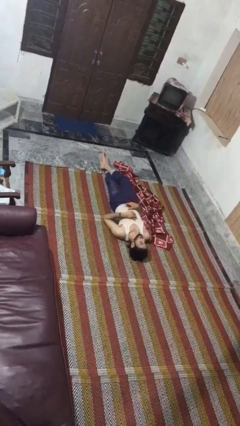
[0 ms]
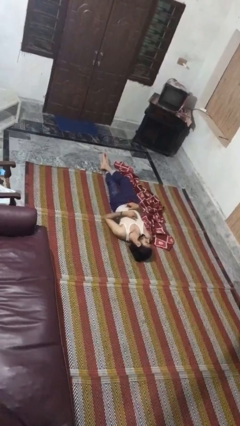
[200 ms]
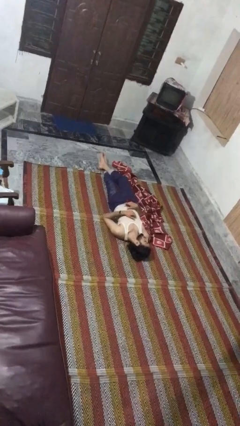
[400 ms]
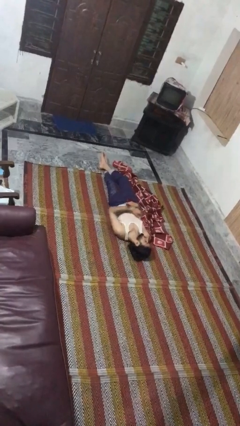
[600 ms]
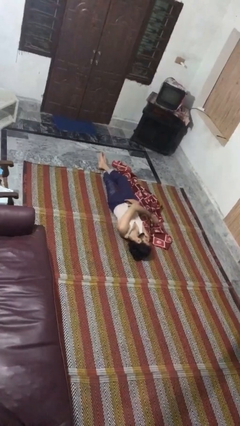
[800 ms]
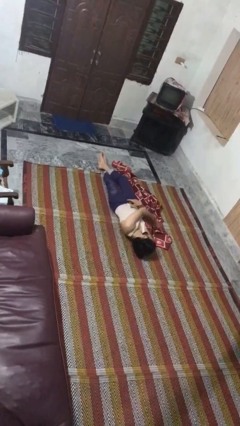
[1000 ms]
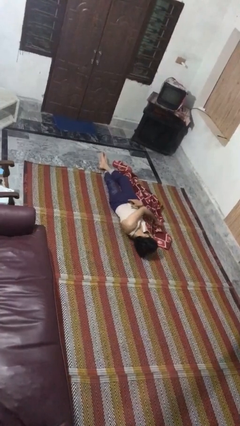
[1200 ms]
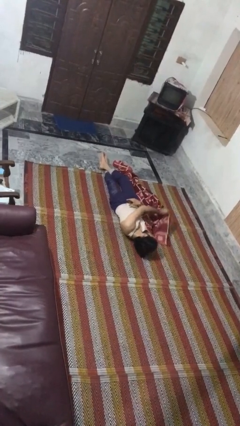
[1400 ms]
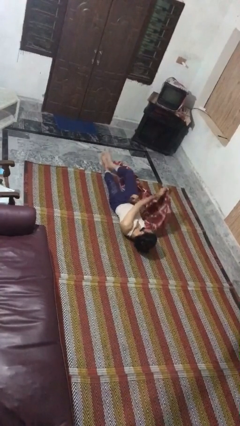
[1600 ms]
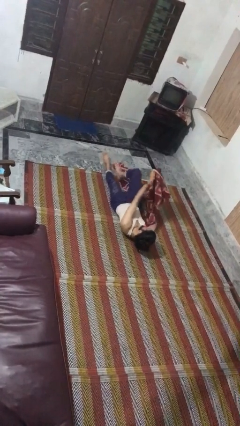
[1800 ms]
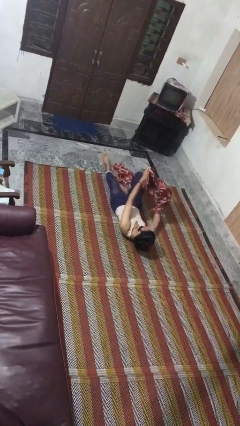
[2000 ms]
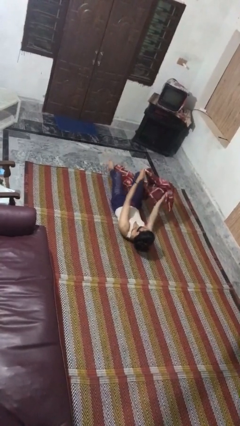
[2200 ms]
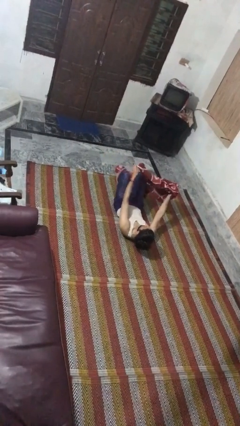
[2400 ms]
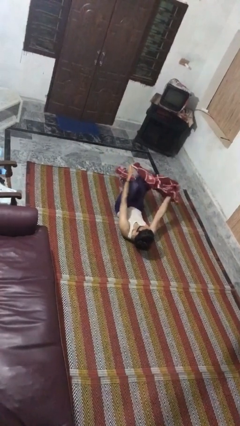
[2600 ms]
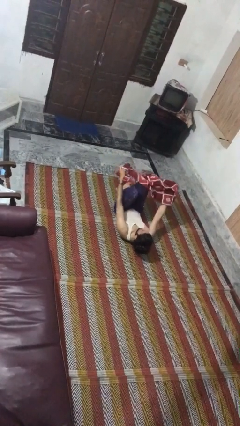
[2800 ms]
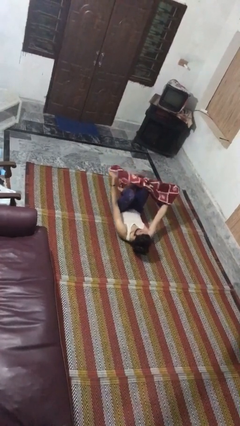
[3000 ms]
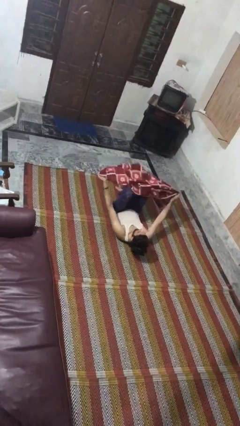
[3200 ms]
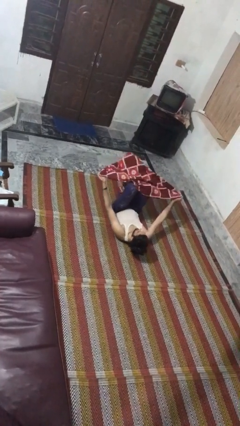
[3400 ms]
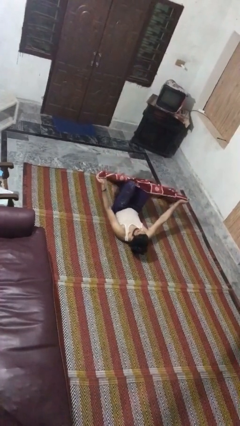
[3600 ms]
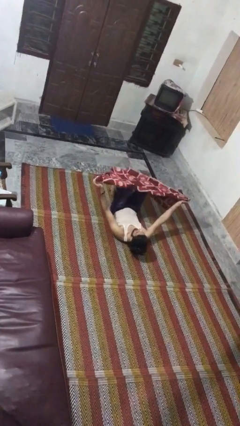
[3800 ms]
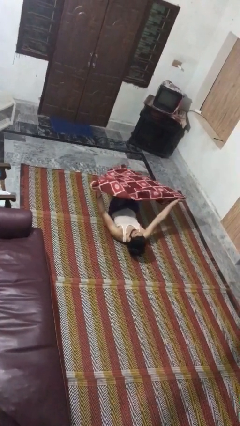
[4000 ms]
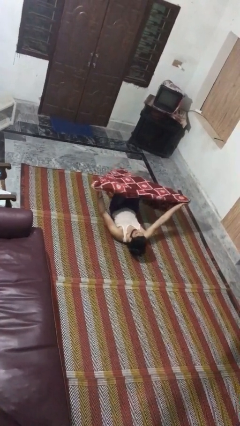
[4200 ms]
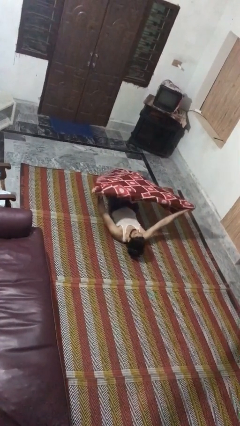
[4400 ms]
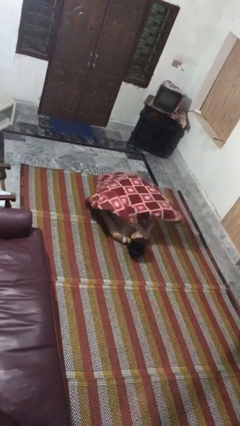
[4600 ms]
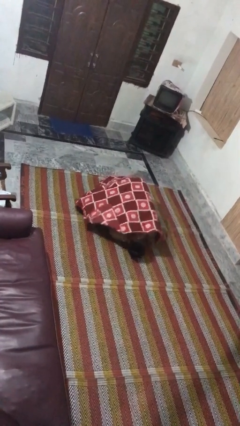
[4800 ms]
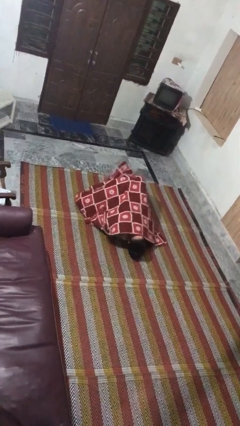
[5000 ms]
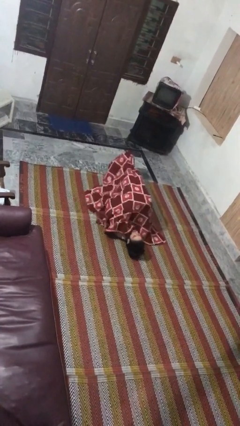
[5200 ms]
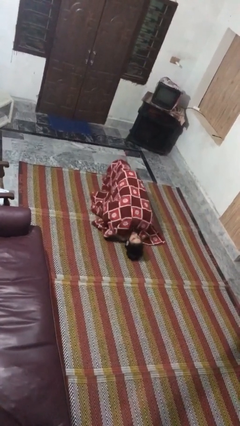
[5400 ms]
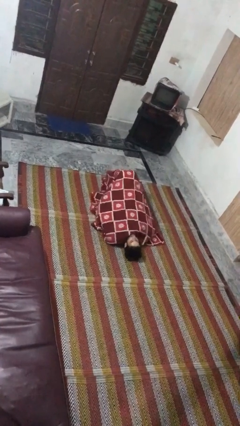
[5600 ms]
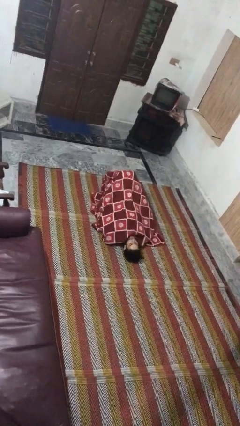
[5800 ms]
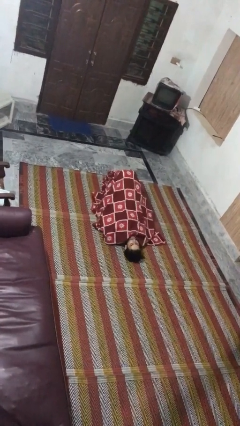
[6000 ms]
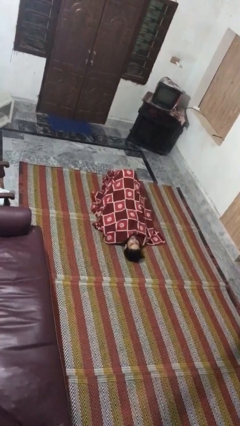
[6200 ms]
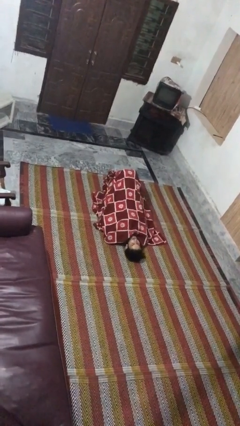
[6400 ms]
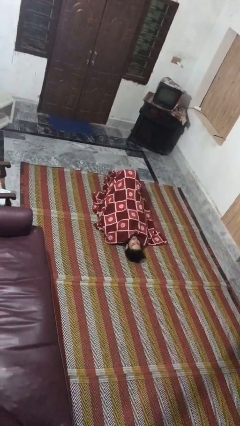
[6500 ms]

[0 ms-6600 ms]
person covers with blanket

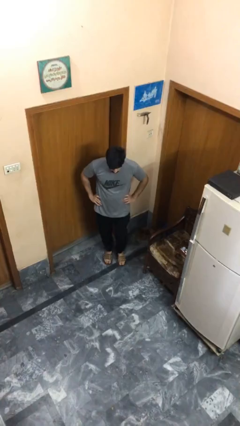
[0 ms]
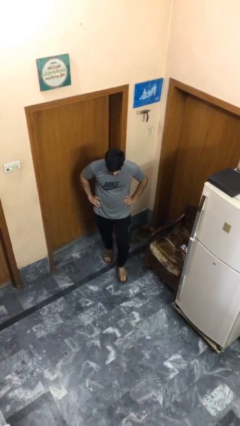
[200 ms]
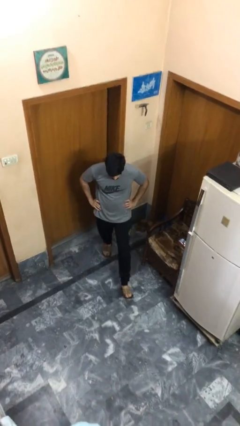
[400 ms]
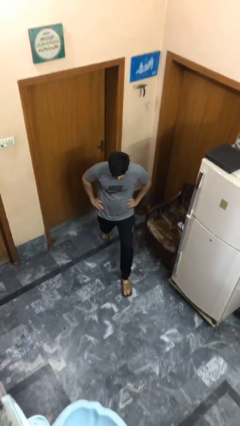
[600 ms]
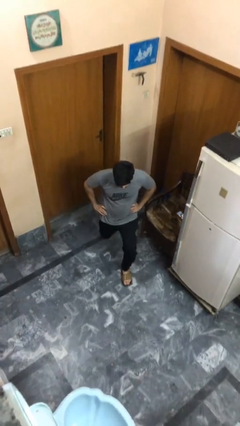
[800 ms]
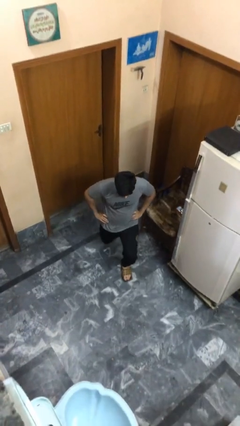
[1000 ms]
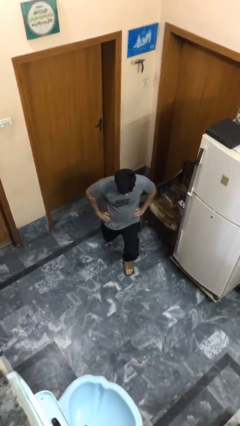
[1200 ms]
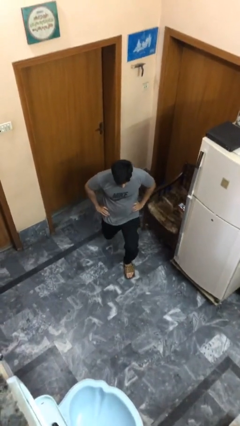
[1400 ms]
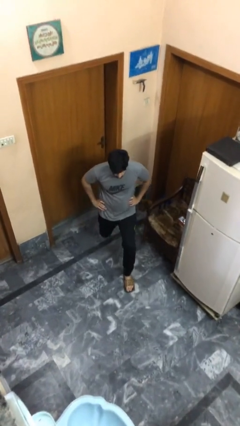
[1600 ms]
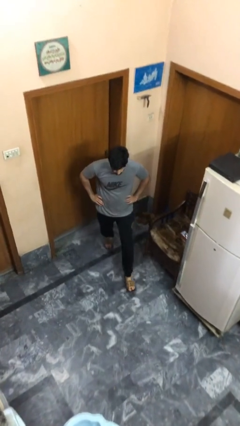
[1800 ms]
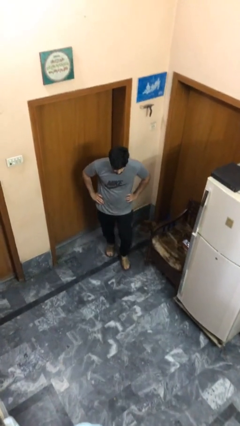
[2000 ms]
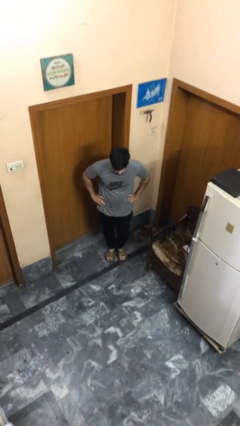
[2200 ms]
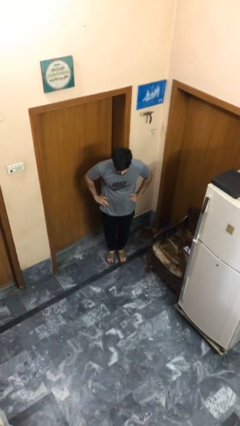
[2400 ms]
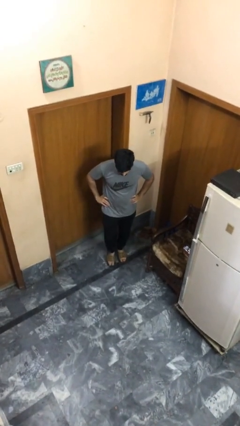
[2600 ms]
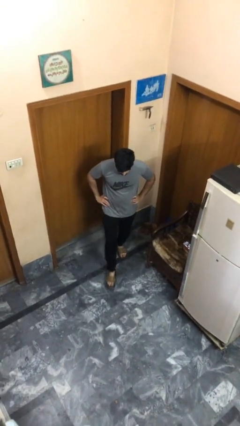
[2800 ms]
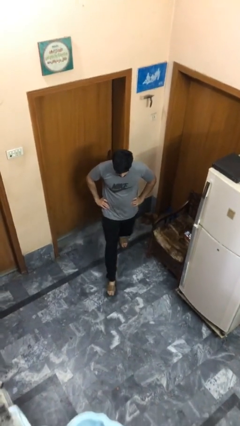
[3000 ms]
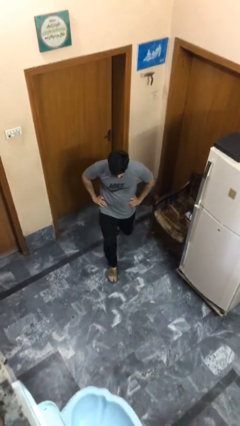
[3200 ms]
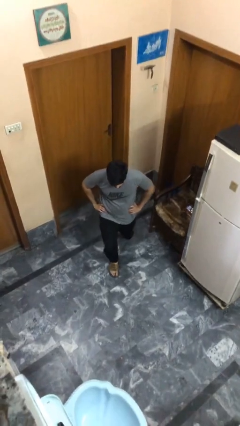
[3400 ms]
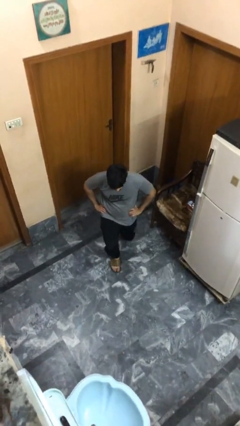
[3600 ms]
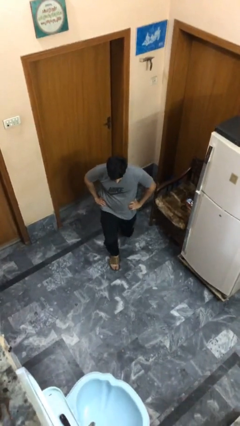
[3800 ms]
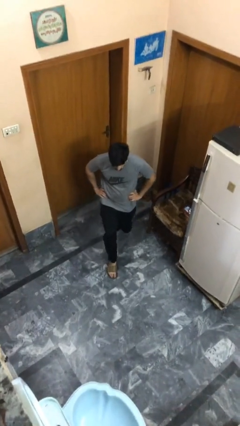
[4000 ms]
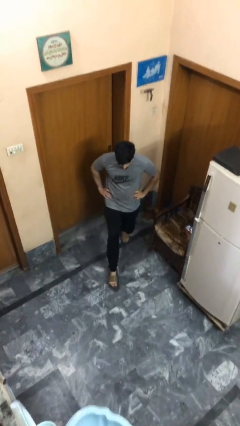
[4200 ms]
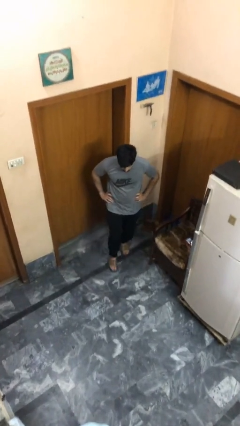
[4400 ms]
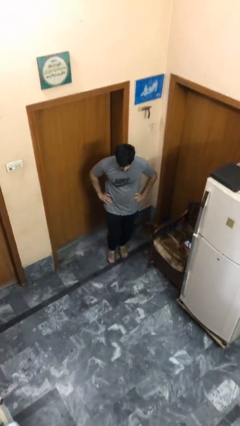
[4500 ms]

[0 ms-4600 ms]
person exercises with lunges

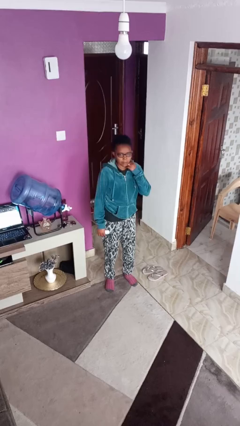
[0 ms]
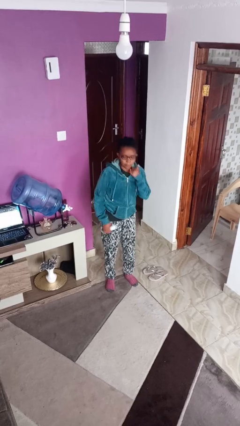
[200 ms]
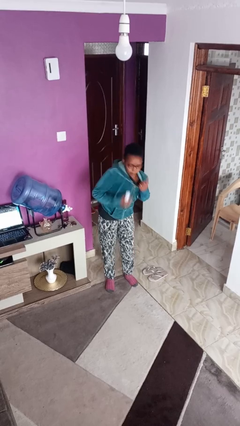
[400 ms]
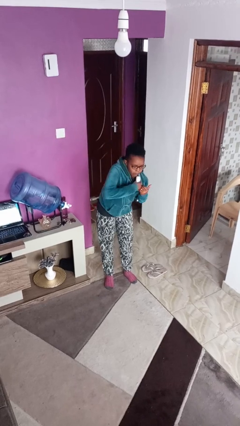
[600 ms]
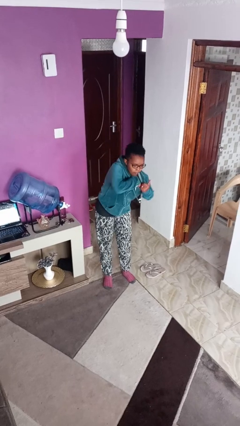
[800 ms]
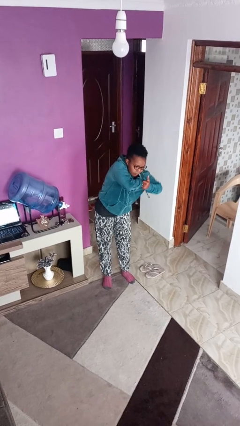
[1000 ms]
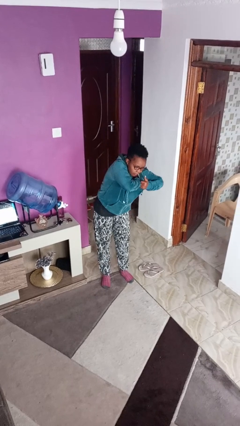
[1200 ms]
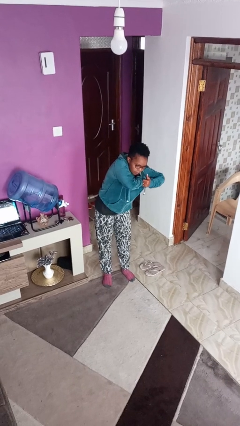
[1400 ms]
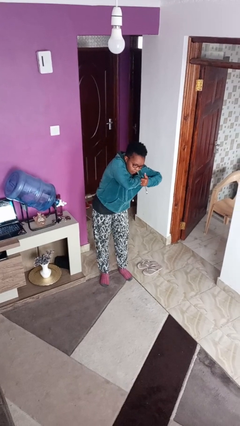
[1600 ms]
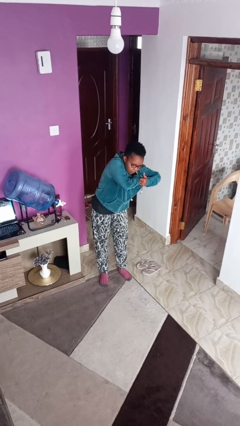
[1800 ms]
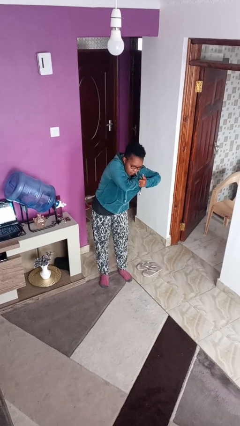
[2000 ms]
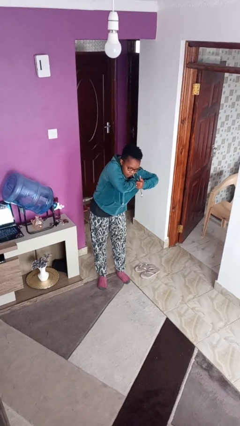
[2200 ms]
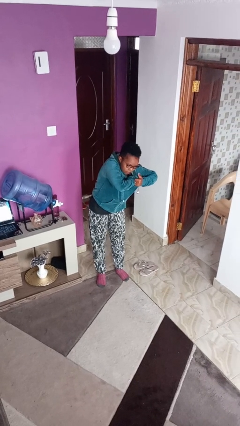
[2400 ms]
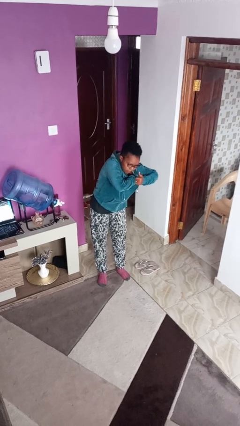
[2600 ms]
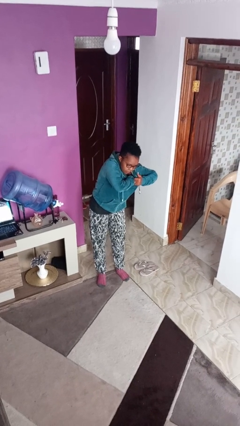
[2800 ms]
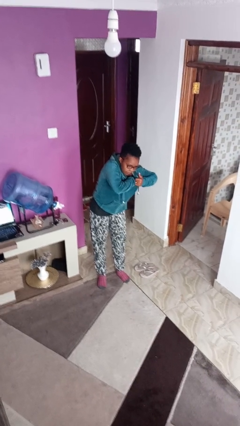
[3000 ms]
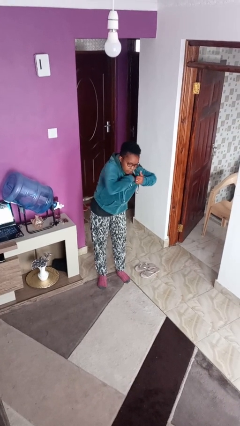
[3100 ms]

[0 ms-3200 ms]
person applies deodorant

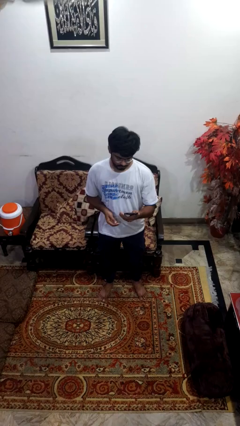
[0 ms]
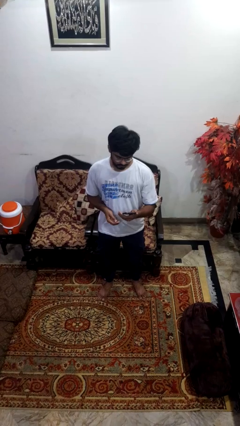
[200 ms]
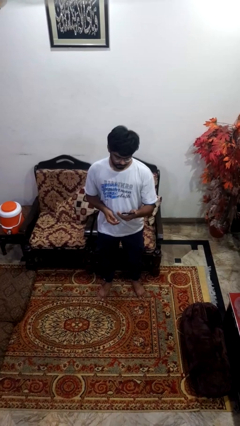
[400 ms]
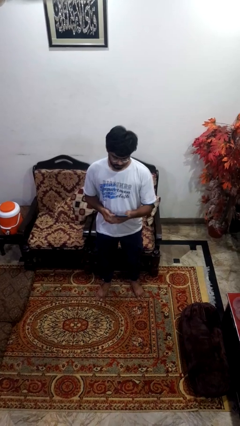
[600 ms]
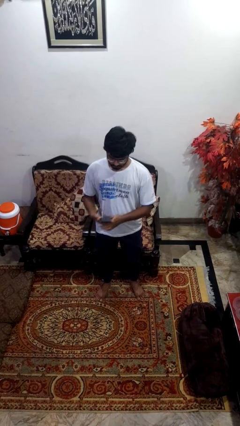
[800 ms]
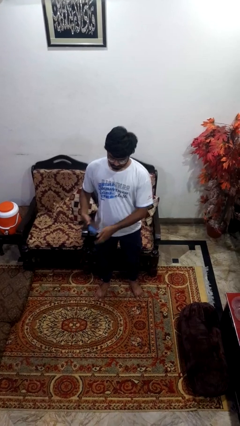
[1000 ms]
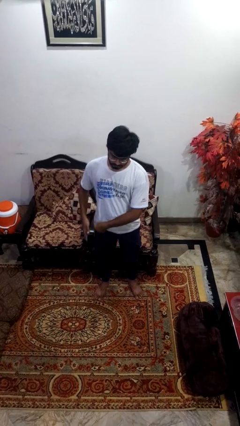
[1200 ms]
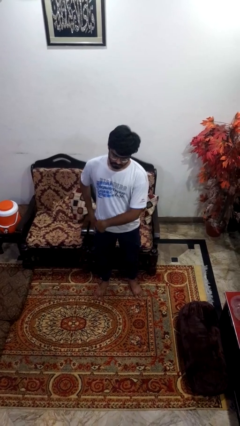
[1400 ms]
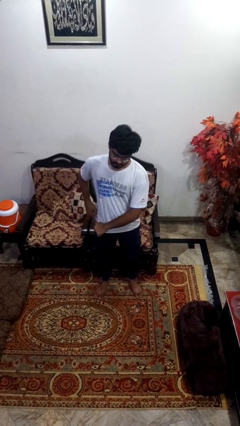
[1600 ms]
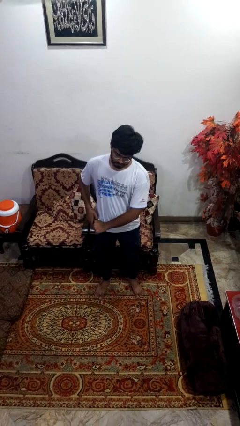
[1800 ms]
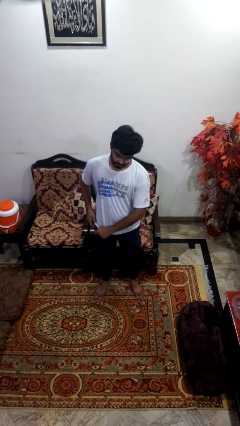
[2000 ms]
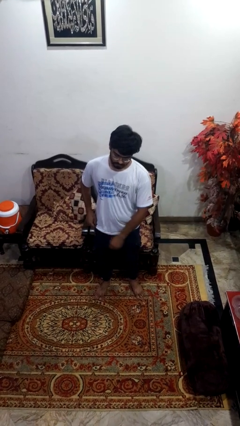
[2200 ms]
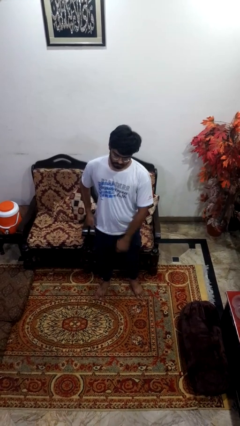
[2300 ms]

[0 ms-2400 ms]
person puts phone into pocket

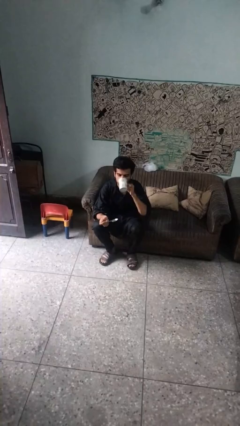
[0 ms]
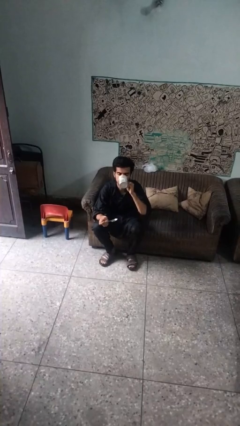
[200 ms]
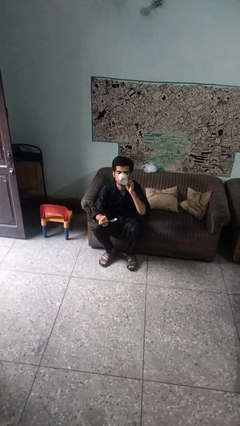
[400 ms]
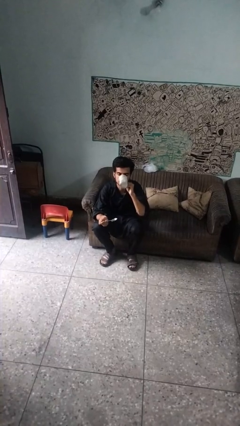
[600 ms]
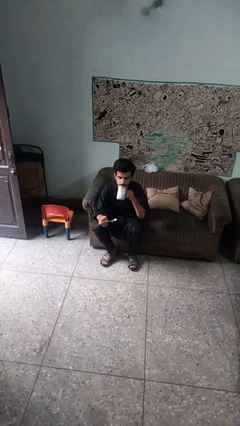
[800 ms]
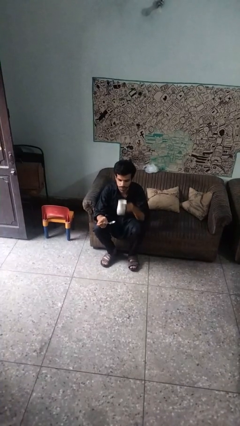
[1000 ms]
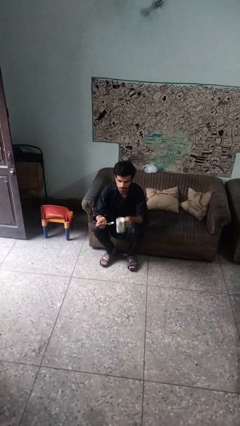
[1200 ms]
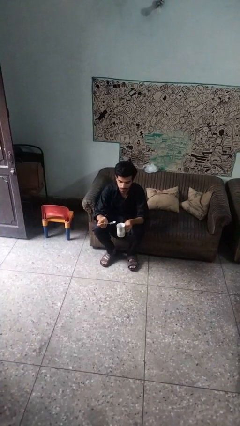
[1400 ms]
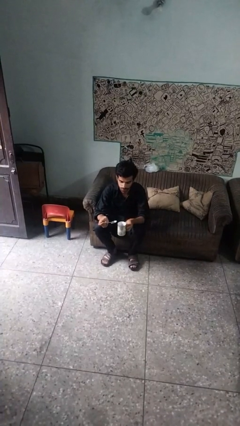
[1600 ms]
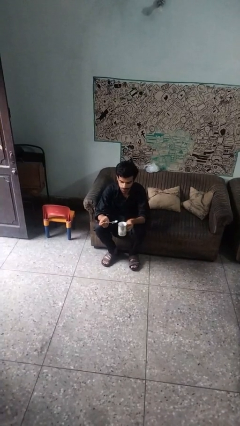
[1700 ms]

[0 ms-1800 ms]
person drinks from mug
